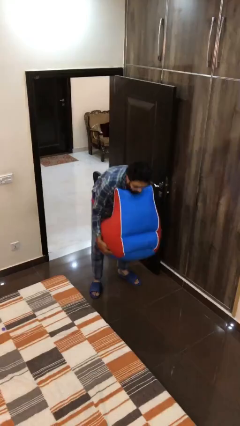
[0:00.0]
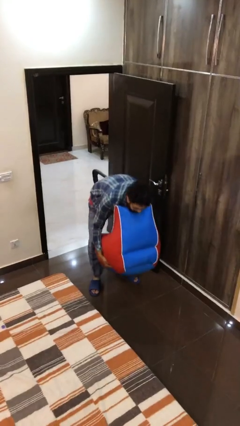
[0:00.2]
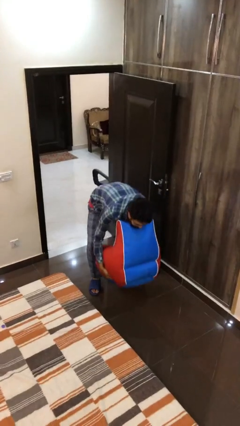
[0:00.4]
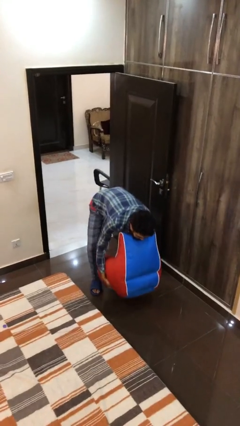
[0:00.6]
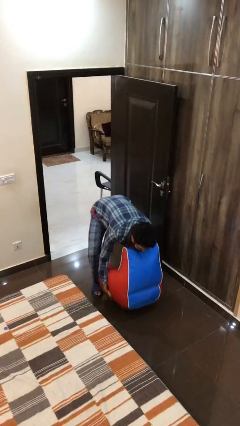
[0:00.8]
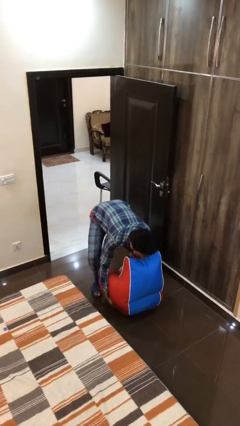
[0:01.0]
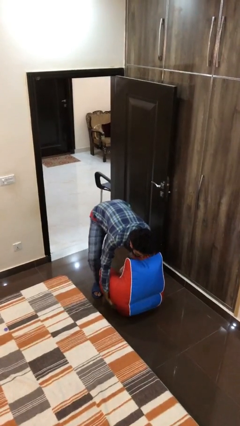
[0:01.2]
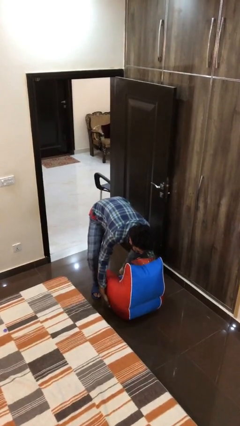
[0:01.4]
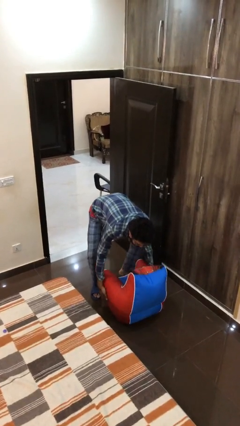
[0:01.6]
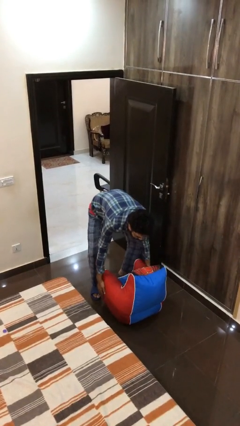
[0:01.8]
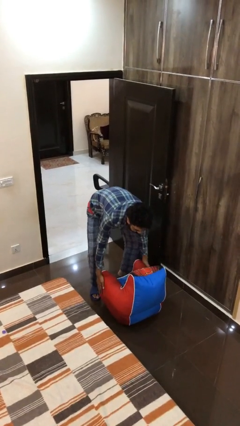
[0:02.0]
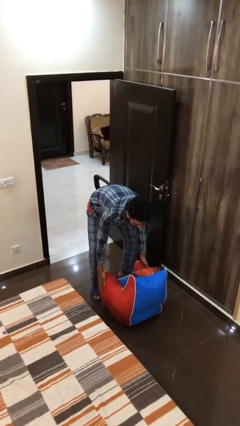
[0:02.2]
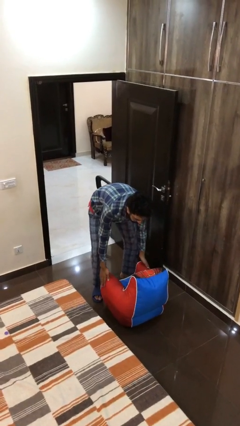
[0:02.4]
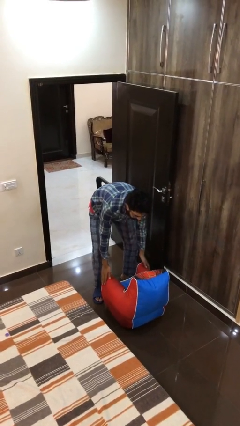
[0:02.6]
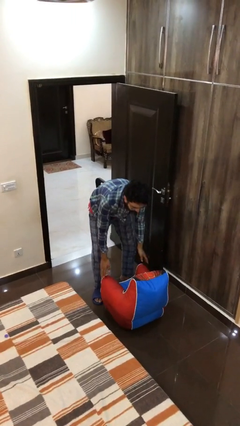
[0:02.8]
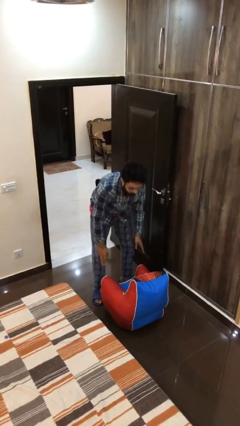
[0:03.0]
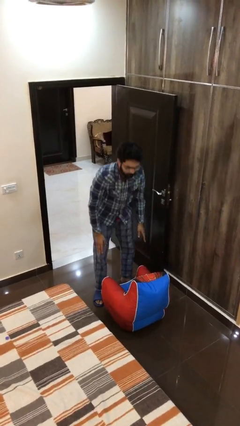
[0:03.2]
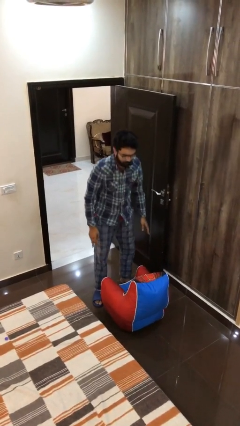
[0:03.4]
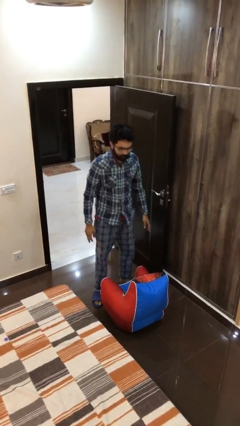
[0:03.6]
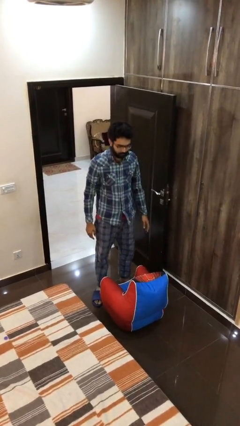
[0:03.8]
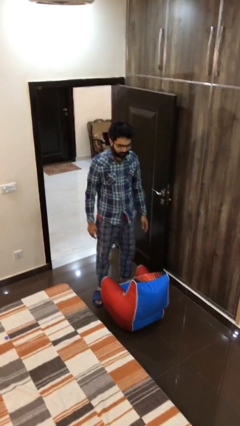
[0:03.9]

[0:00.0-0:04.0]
person puts down object on floor

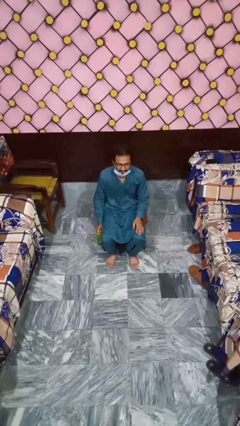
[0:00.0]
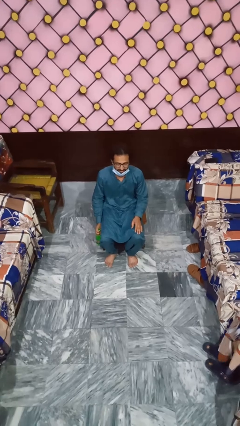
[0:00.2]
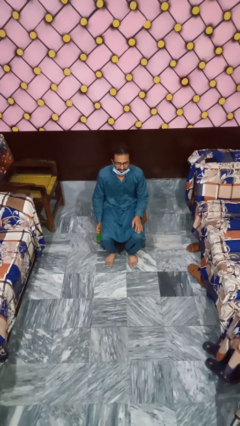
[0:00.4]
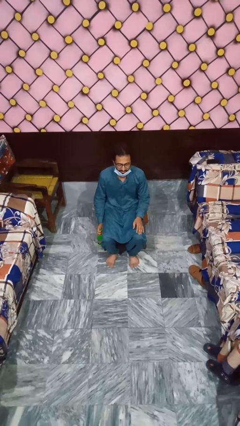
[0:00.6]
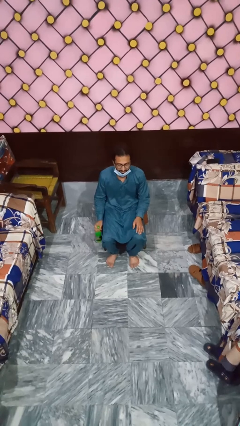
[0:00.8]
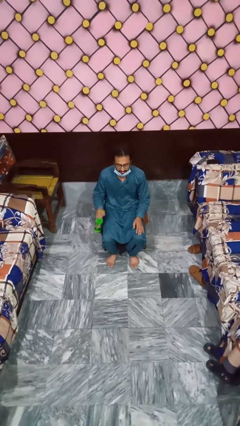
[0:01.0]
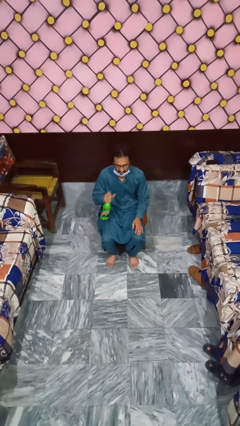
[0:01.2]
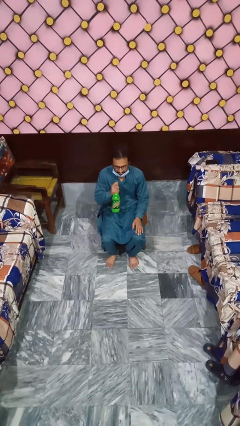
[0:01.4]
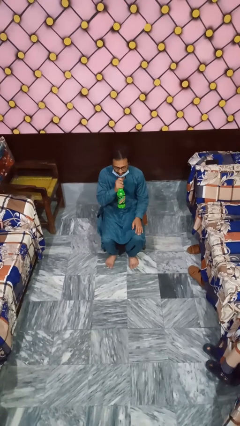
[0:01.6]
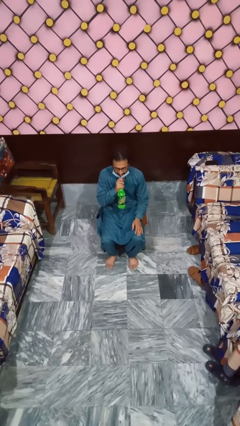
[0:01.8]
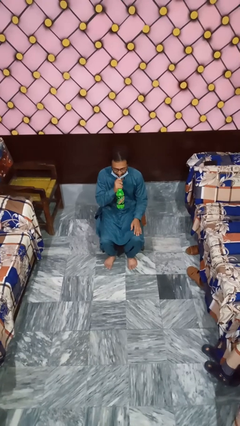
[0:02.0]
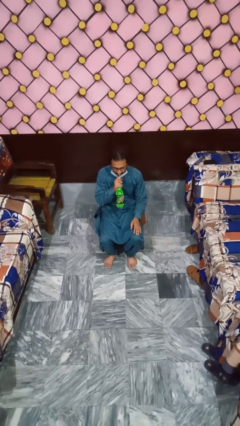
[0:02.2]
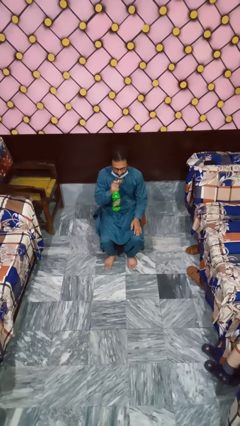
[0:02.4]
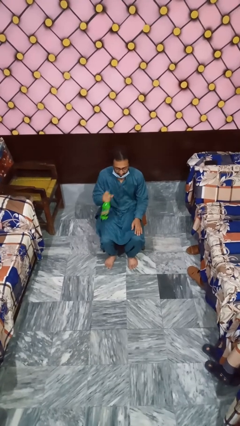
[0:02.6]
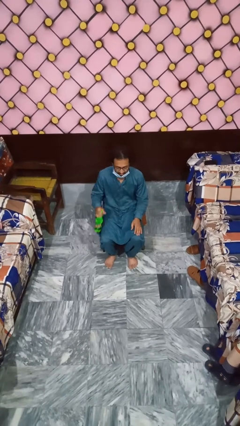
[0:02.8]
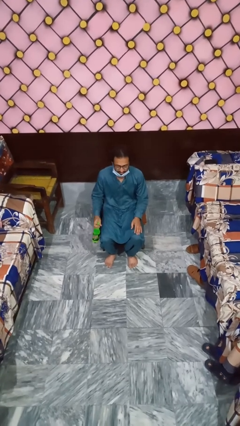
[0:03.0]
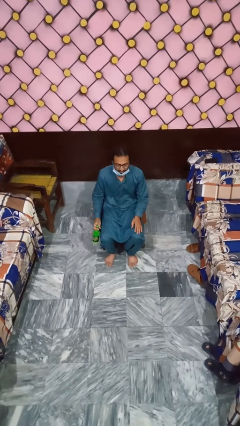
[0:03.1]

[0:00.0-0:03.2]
person drinks from straw

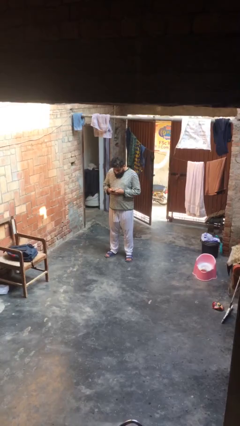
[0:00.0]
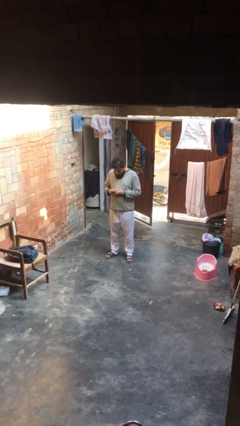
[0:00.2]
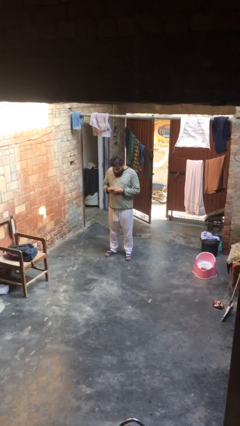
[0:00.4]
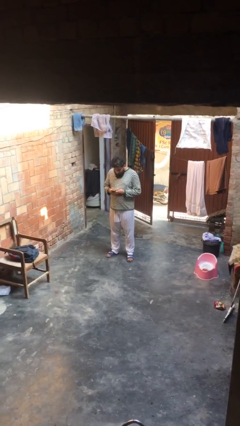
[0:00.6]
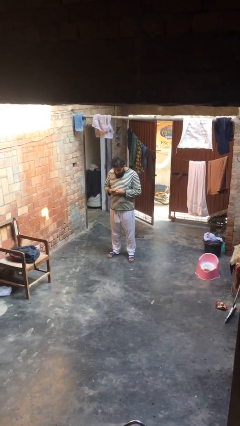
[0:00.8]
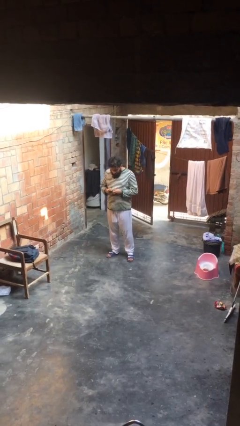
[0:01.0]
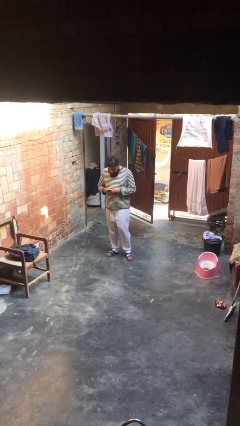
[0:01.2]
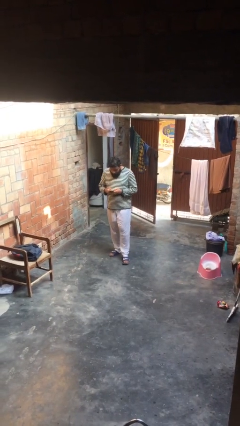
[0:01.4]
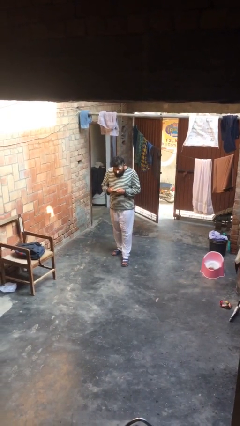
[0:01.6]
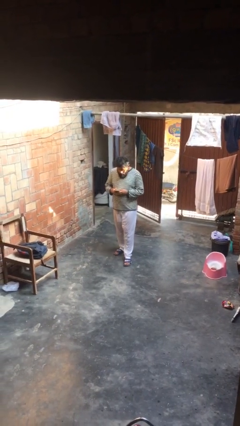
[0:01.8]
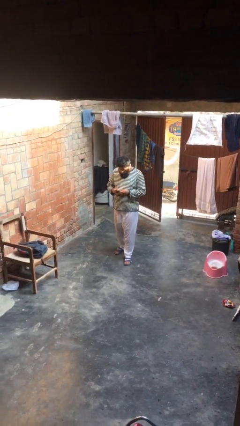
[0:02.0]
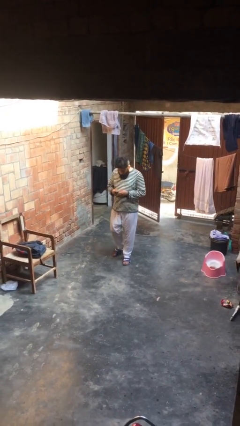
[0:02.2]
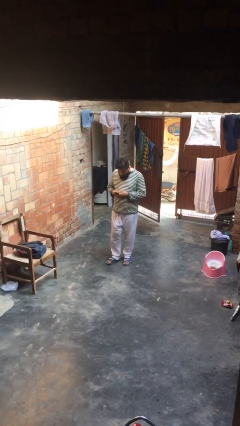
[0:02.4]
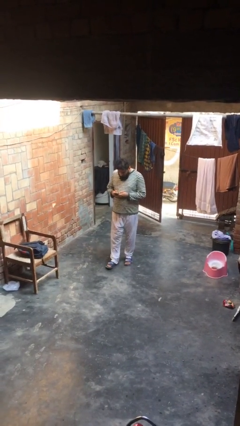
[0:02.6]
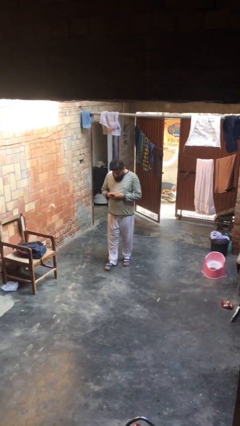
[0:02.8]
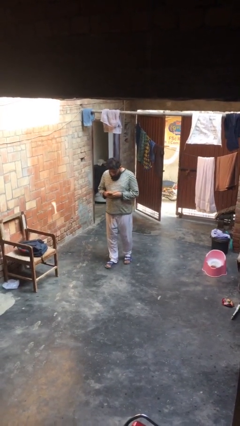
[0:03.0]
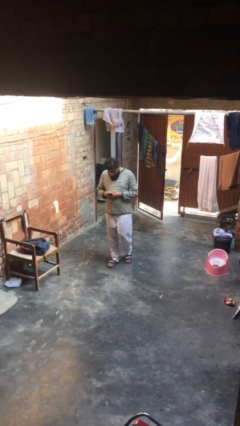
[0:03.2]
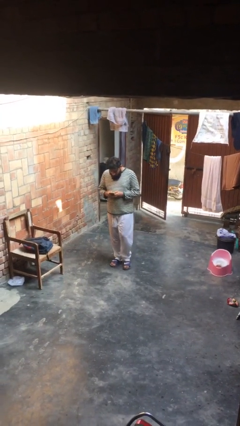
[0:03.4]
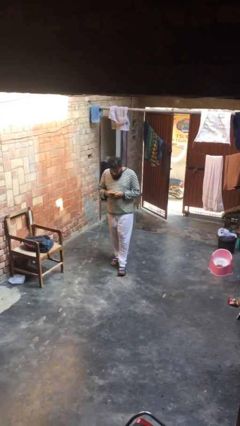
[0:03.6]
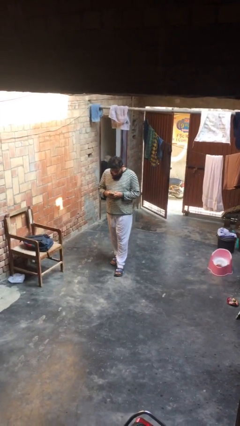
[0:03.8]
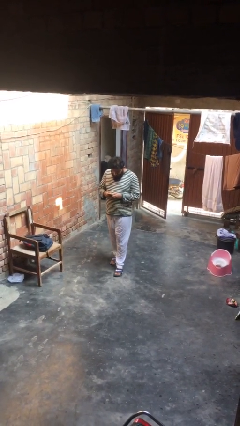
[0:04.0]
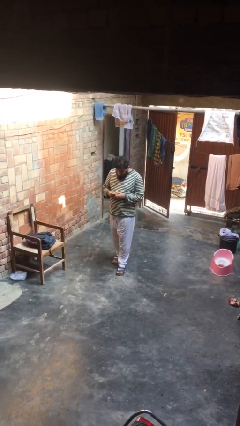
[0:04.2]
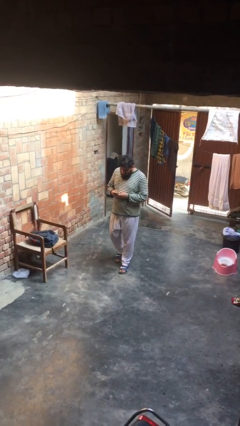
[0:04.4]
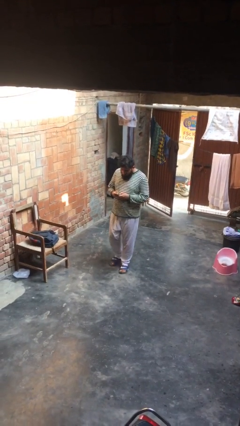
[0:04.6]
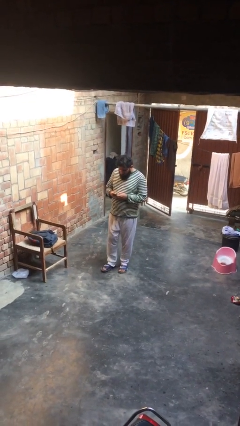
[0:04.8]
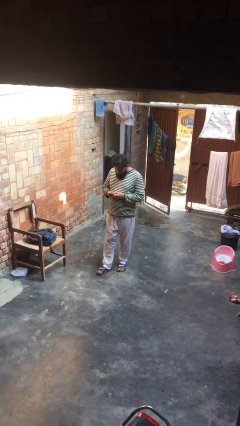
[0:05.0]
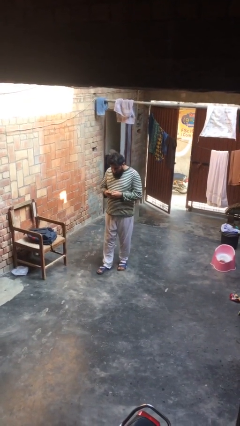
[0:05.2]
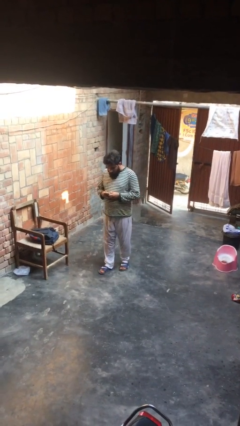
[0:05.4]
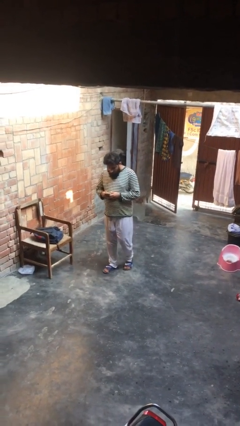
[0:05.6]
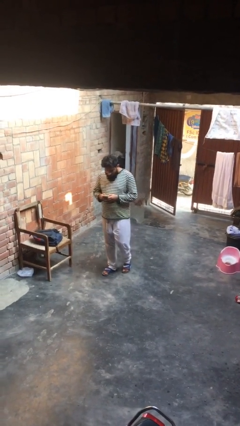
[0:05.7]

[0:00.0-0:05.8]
person texts on phone

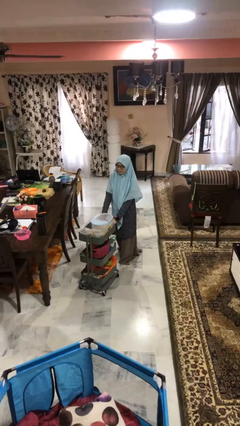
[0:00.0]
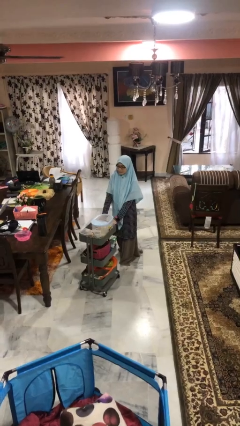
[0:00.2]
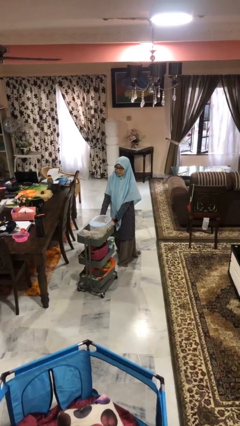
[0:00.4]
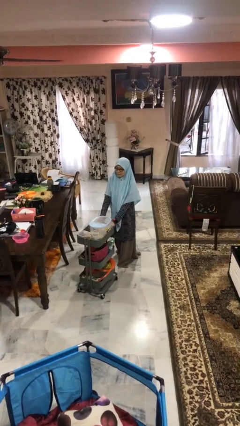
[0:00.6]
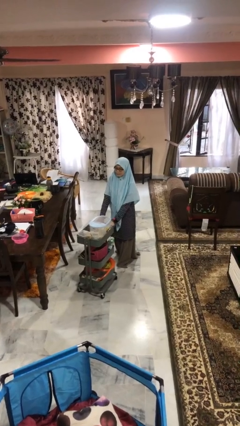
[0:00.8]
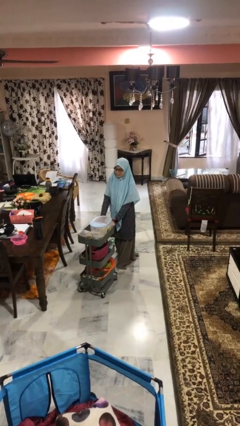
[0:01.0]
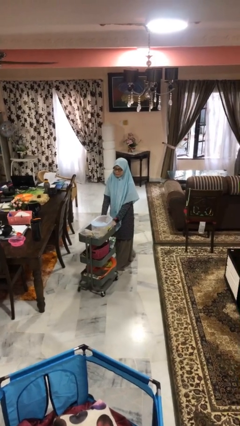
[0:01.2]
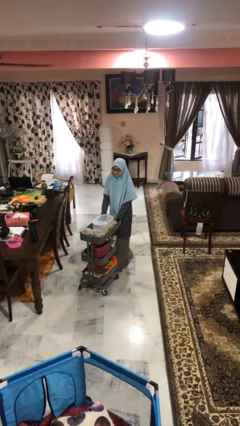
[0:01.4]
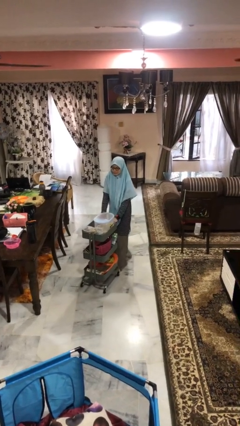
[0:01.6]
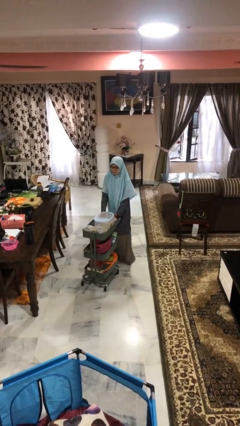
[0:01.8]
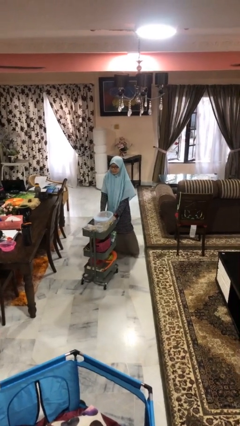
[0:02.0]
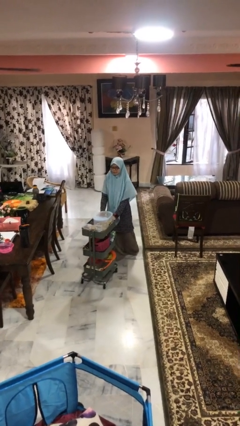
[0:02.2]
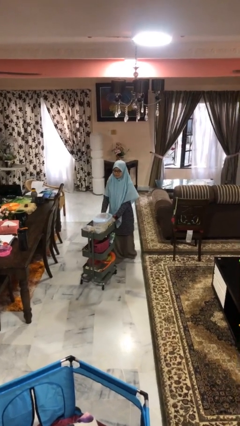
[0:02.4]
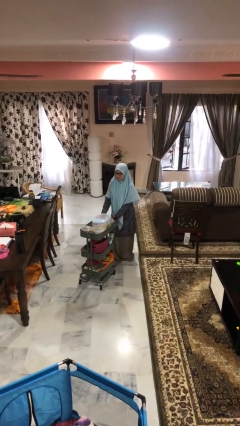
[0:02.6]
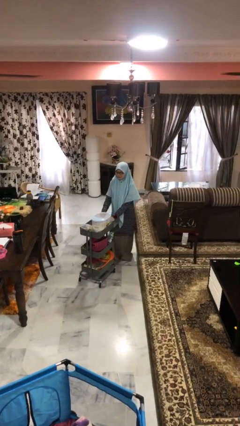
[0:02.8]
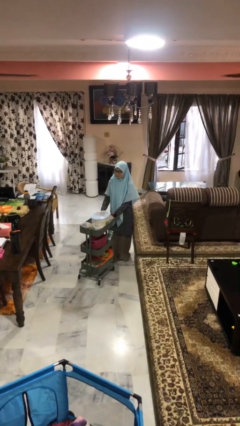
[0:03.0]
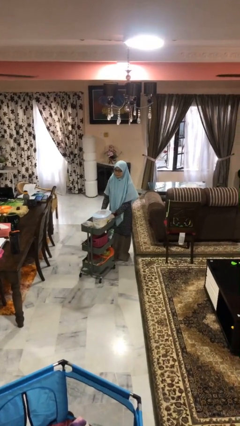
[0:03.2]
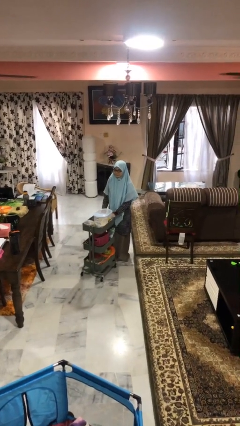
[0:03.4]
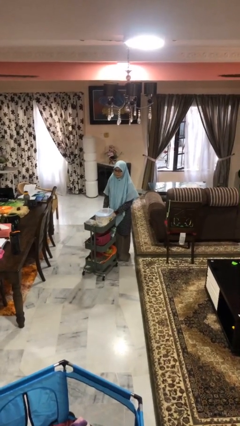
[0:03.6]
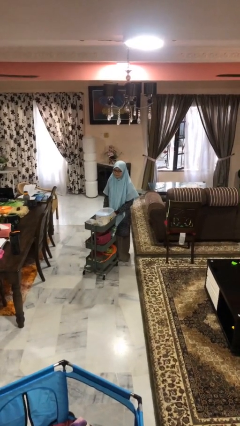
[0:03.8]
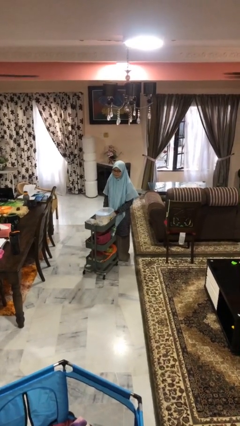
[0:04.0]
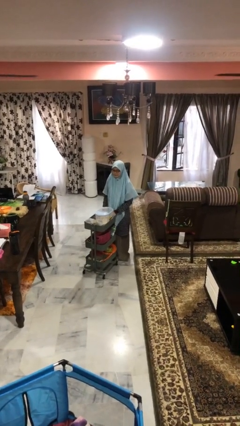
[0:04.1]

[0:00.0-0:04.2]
person pulls wheeled cart

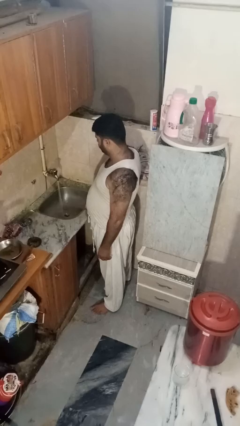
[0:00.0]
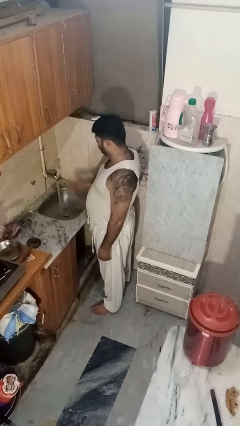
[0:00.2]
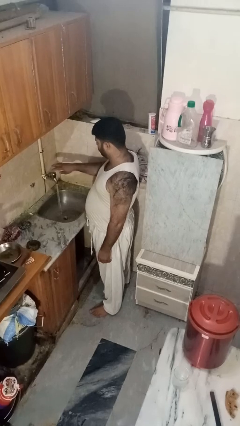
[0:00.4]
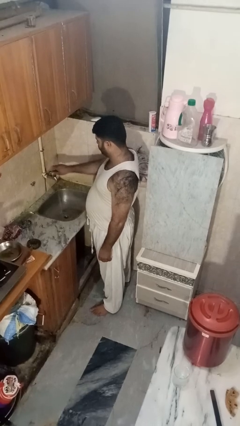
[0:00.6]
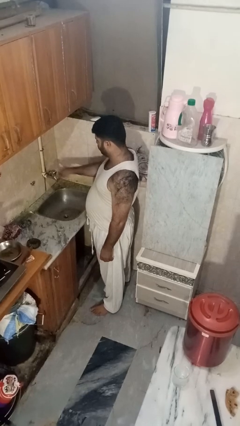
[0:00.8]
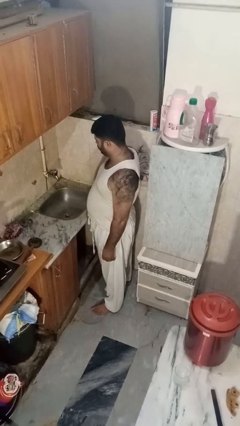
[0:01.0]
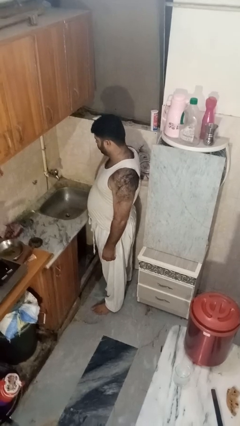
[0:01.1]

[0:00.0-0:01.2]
person turns off faucet
